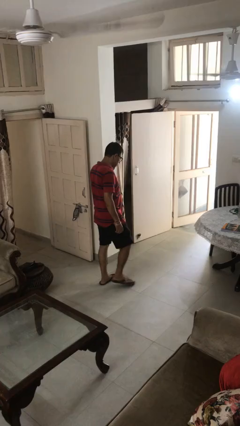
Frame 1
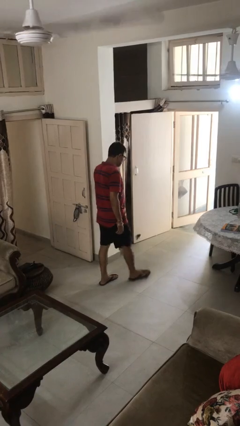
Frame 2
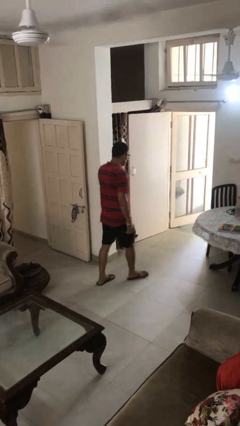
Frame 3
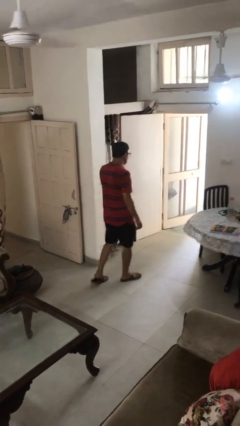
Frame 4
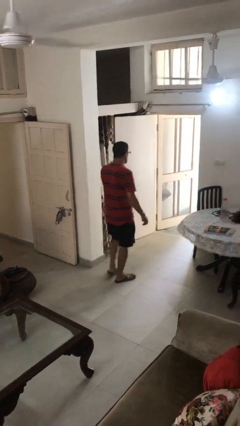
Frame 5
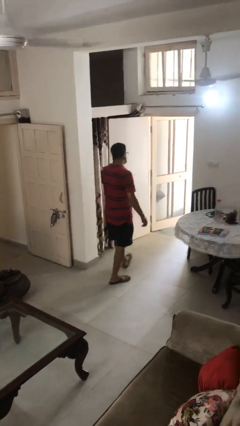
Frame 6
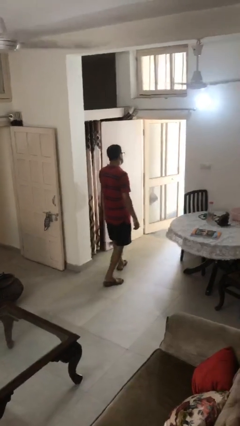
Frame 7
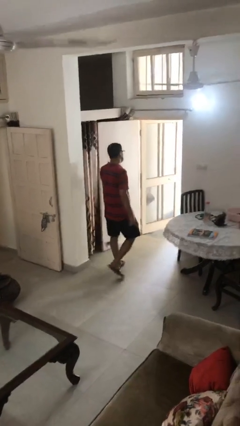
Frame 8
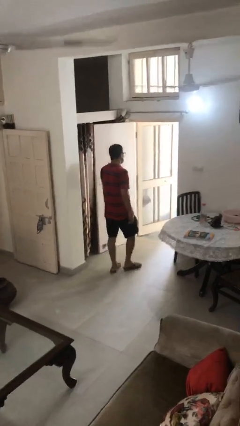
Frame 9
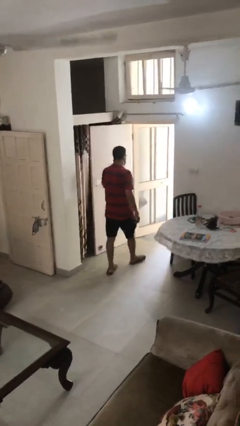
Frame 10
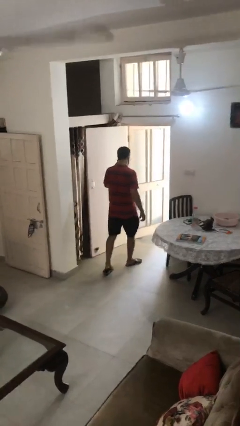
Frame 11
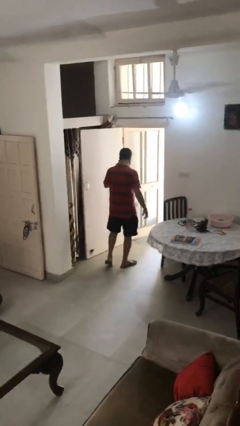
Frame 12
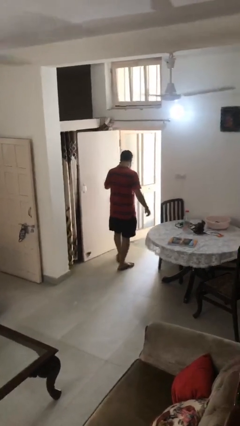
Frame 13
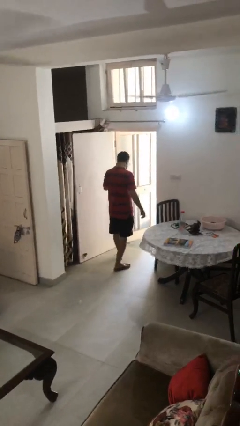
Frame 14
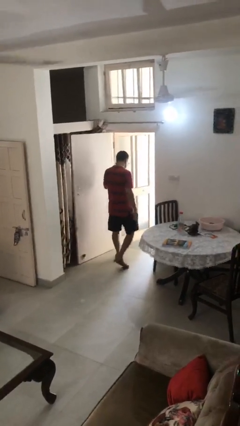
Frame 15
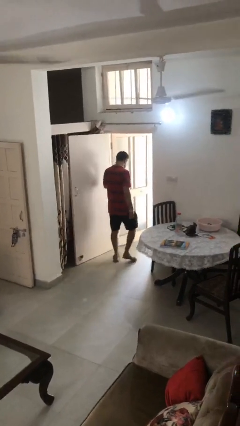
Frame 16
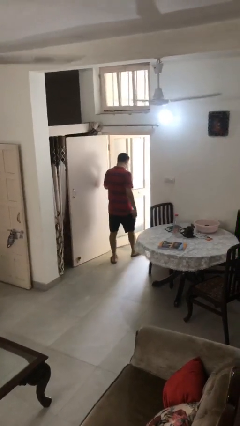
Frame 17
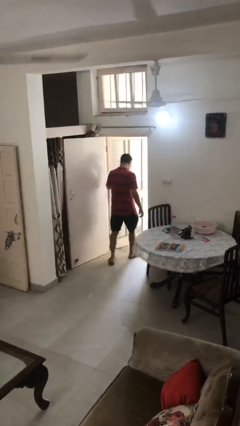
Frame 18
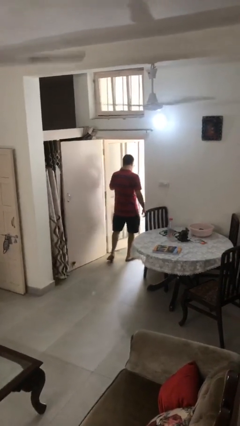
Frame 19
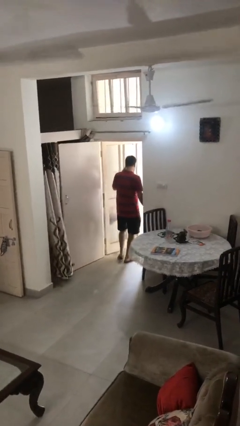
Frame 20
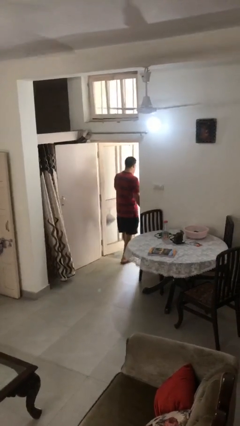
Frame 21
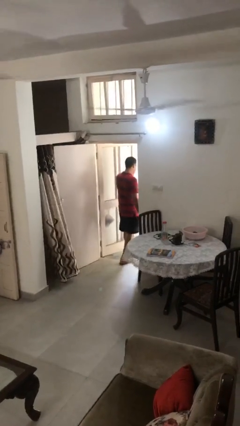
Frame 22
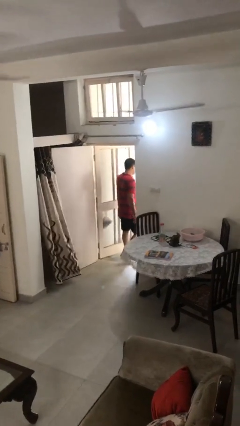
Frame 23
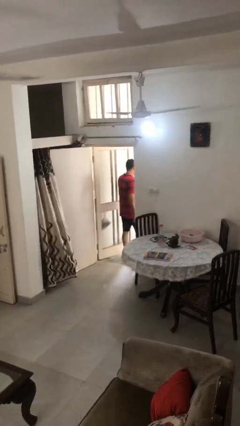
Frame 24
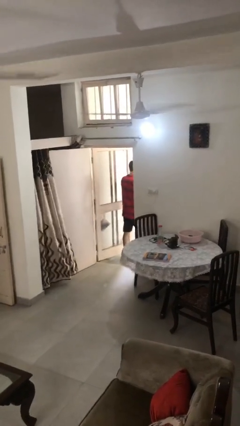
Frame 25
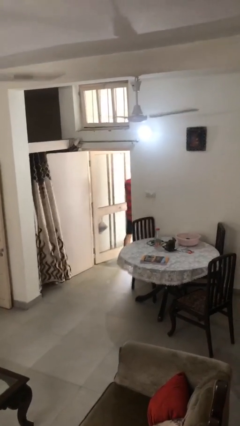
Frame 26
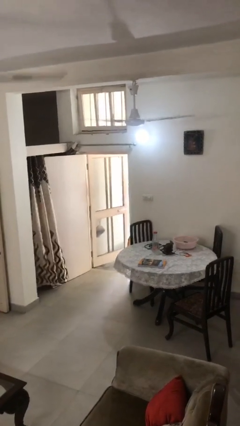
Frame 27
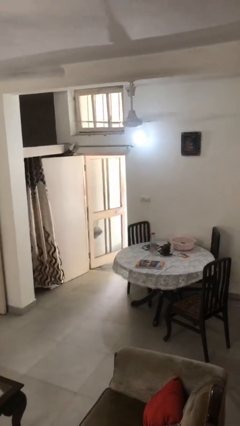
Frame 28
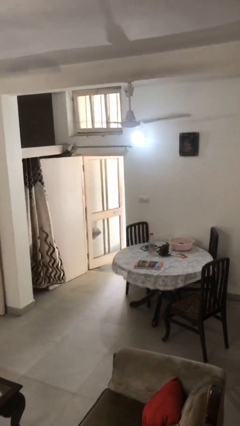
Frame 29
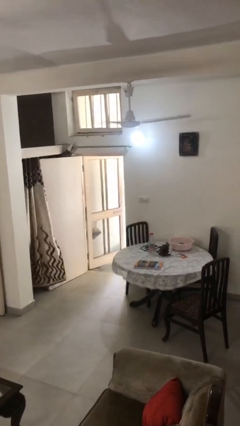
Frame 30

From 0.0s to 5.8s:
person exits scene through structure

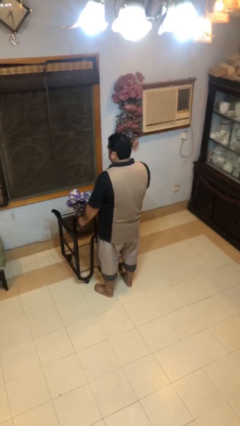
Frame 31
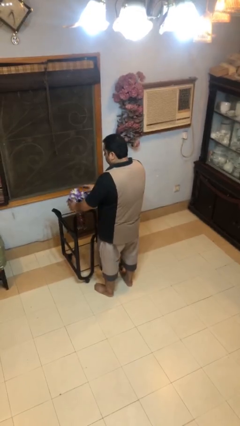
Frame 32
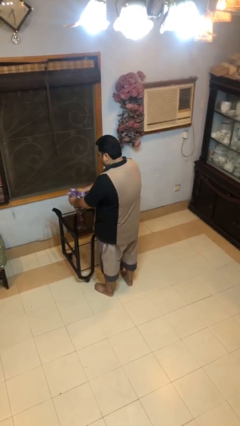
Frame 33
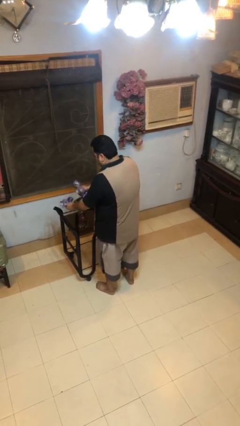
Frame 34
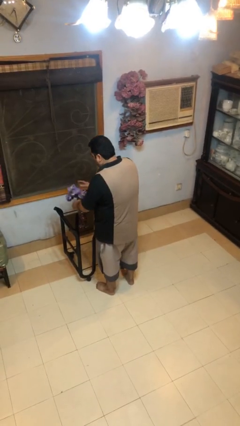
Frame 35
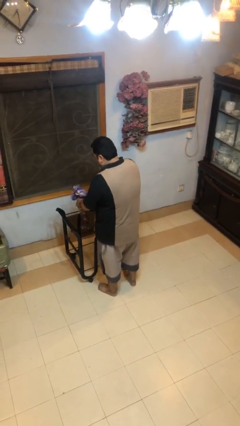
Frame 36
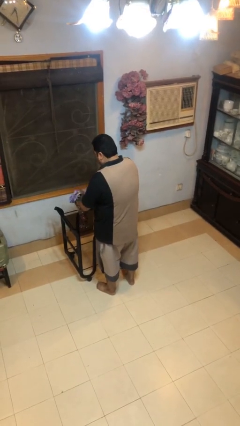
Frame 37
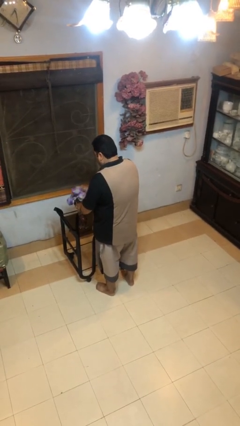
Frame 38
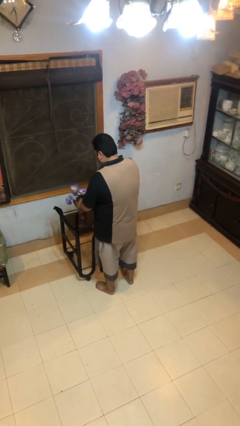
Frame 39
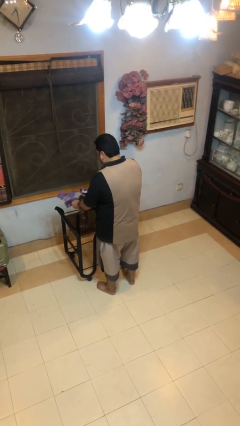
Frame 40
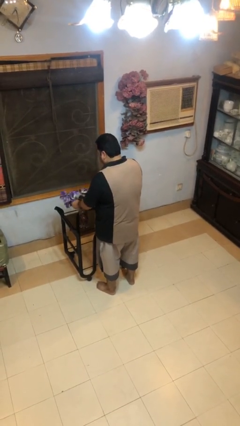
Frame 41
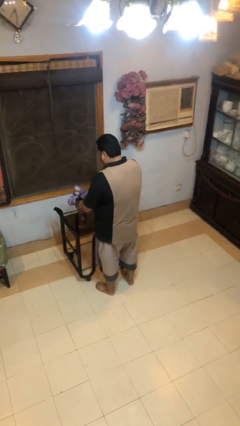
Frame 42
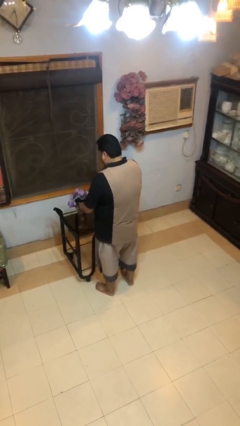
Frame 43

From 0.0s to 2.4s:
person arranges flowers in vase

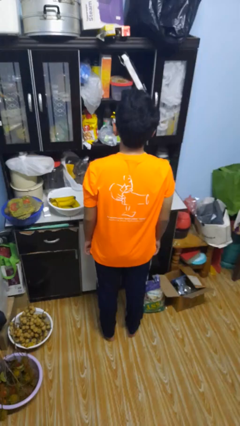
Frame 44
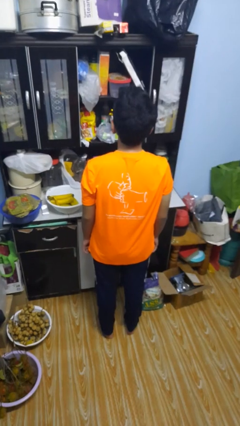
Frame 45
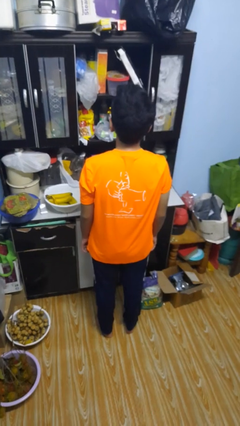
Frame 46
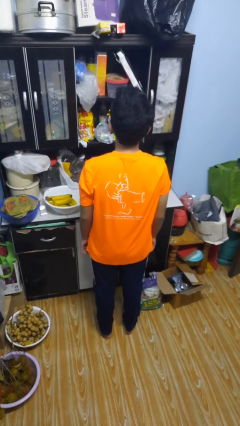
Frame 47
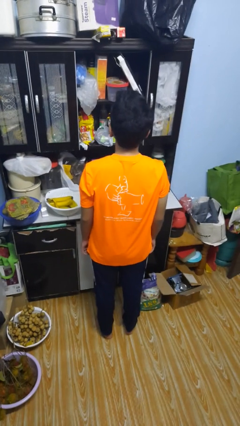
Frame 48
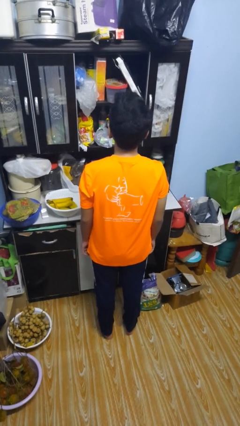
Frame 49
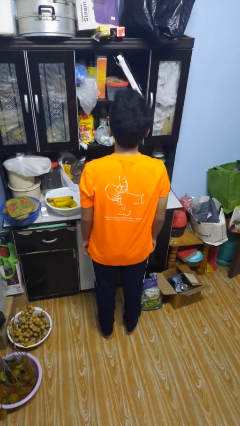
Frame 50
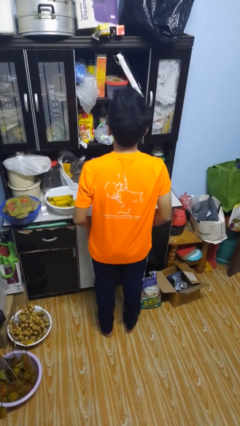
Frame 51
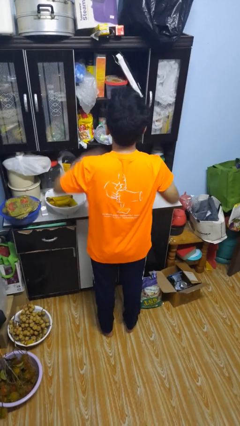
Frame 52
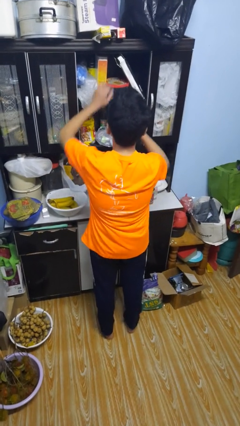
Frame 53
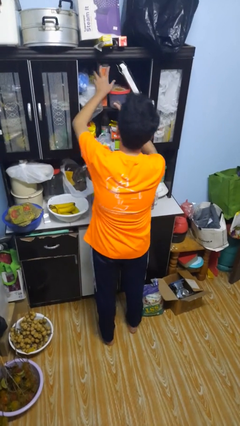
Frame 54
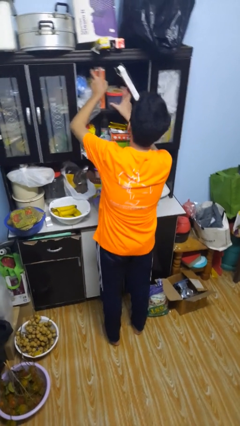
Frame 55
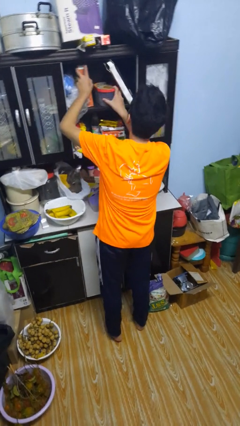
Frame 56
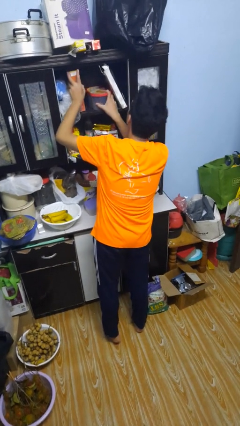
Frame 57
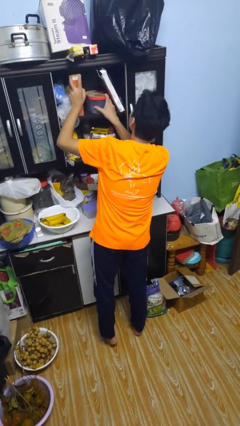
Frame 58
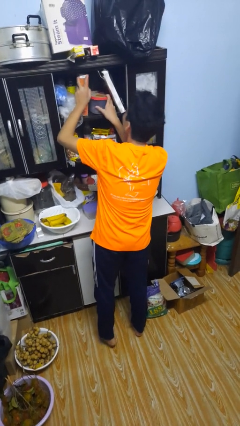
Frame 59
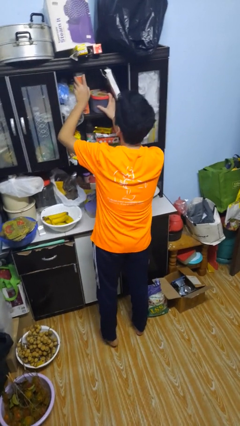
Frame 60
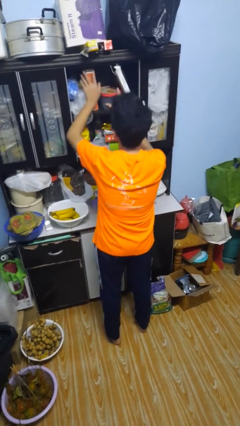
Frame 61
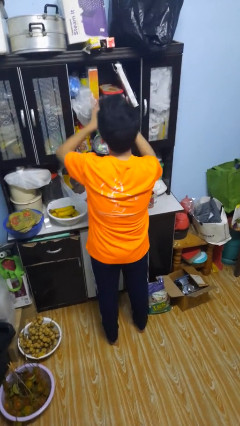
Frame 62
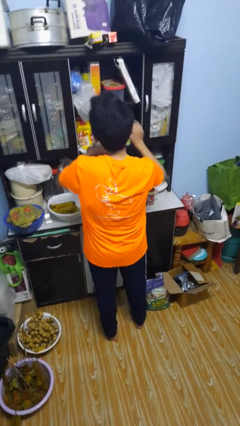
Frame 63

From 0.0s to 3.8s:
person searches in cabinet

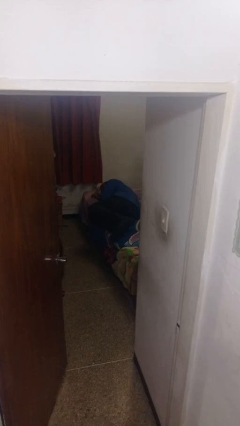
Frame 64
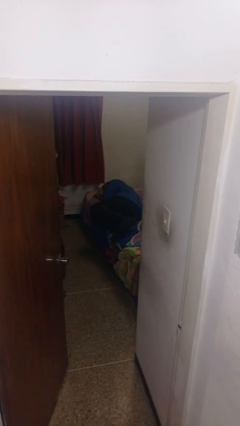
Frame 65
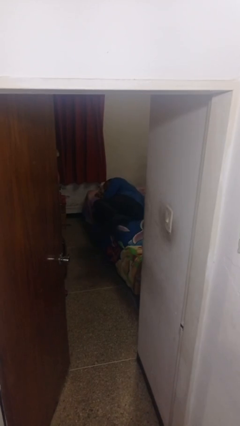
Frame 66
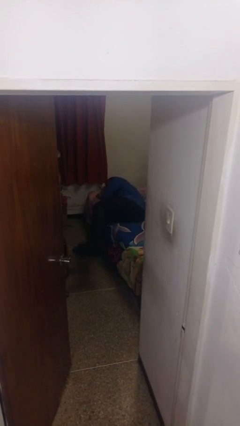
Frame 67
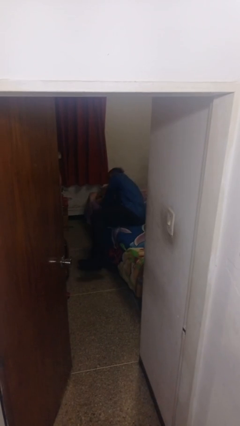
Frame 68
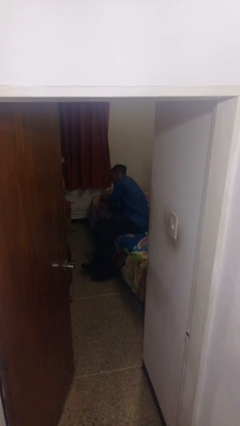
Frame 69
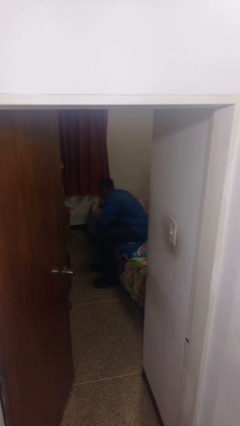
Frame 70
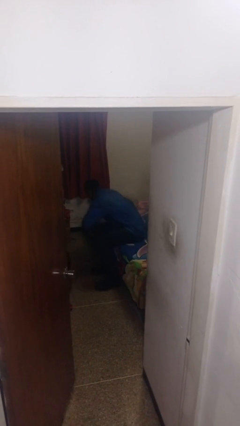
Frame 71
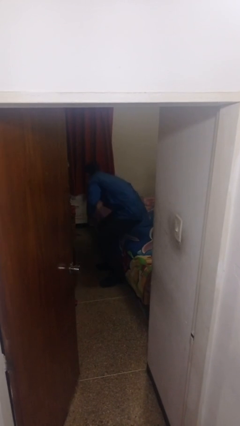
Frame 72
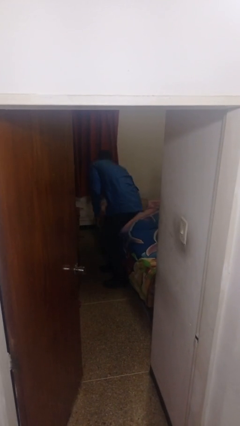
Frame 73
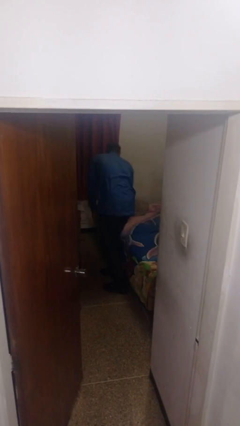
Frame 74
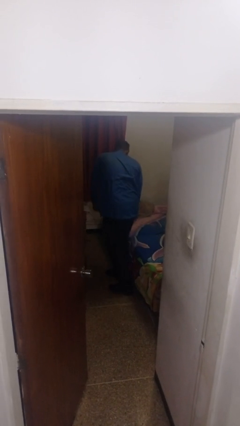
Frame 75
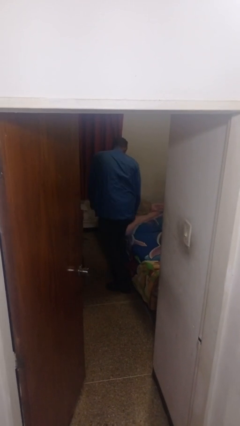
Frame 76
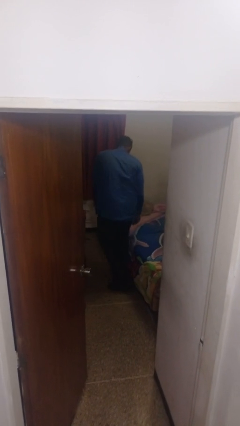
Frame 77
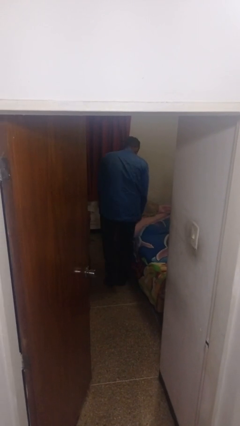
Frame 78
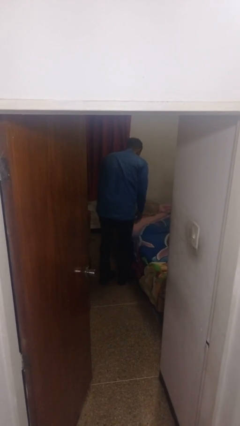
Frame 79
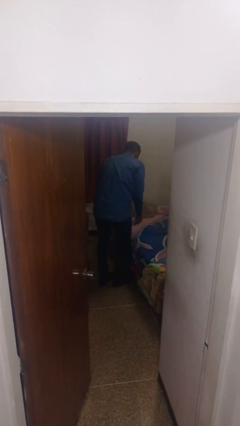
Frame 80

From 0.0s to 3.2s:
person stands up

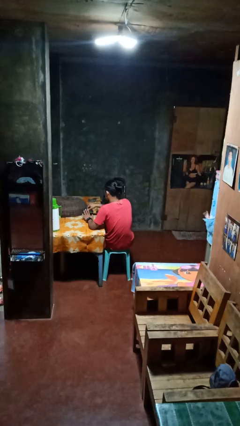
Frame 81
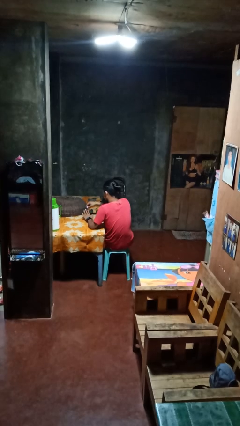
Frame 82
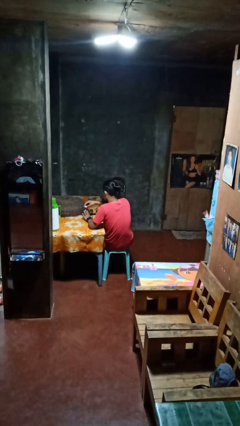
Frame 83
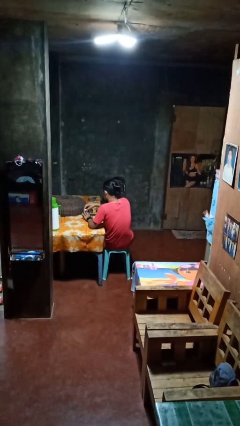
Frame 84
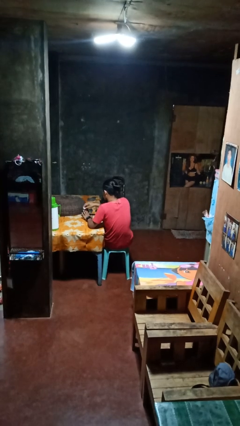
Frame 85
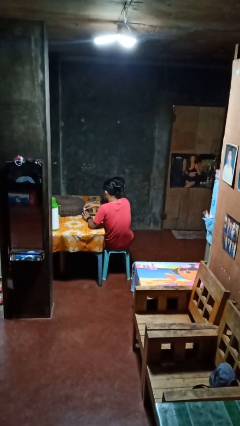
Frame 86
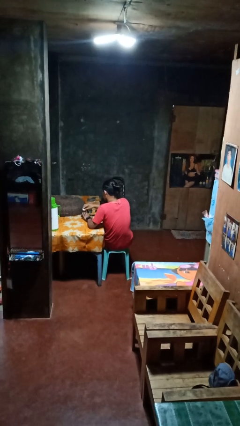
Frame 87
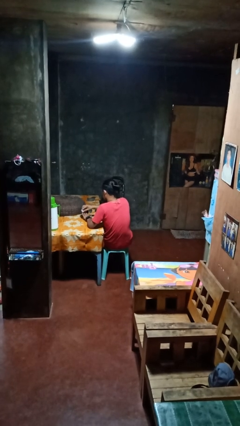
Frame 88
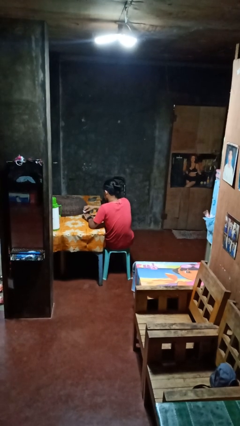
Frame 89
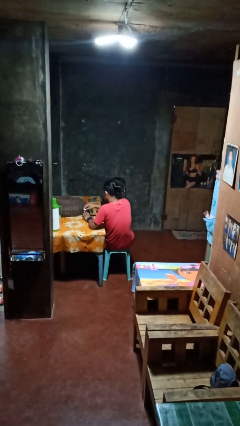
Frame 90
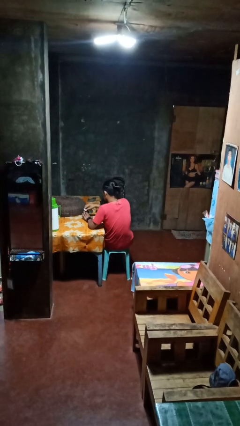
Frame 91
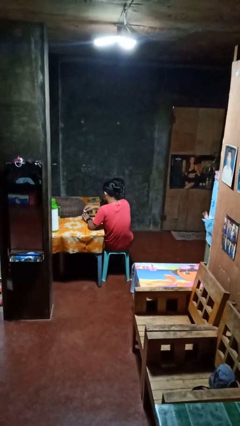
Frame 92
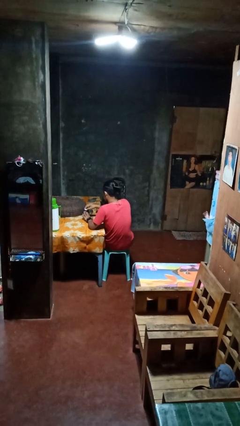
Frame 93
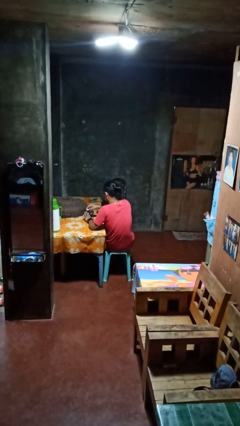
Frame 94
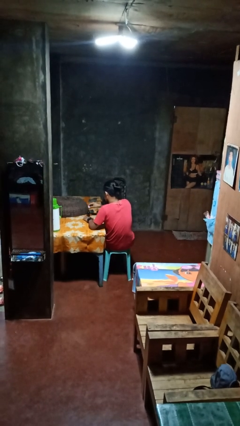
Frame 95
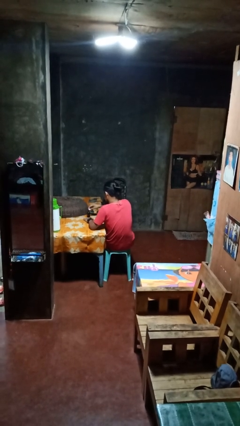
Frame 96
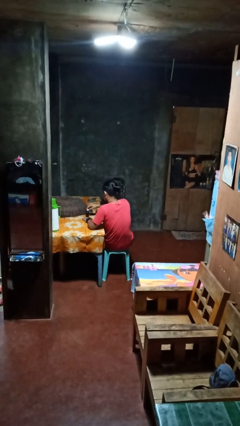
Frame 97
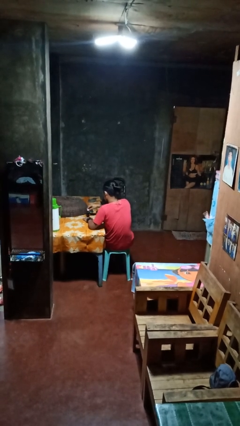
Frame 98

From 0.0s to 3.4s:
person paints fingernails
